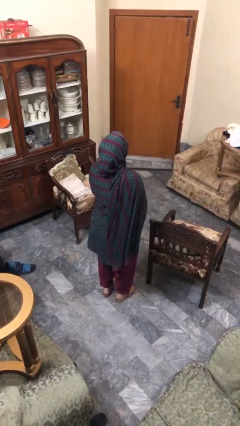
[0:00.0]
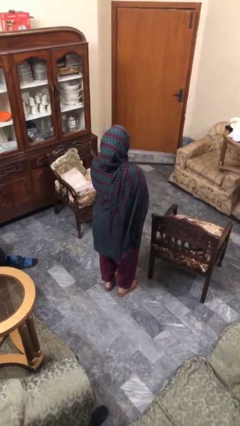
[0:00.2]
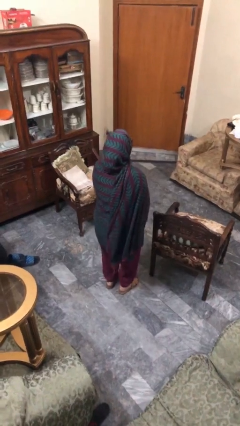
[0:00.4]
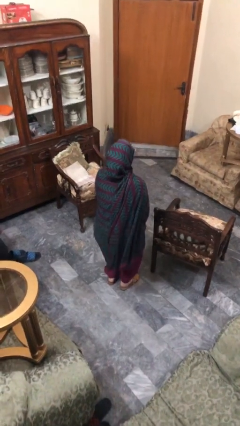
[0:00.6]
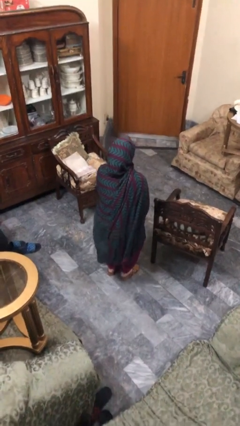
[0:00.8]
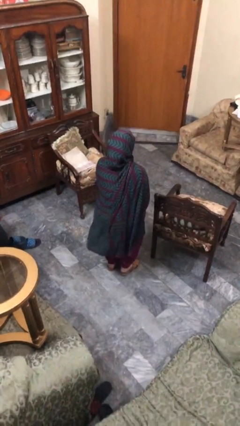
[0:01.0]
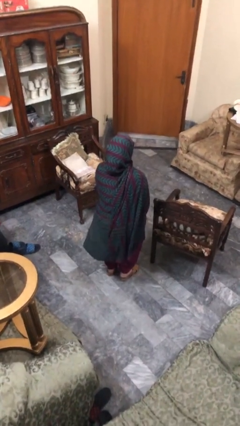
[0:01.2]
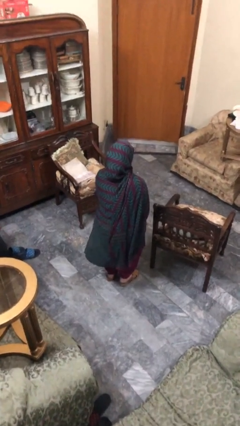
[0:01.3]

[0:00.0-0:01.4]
person squats

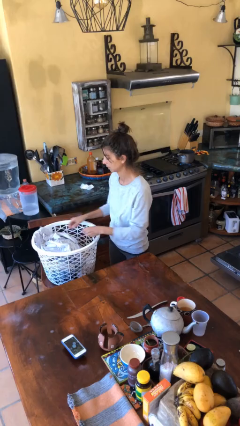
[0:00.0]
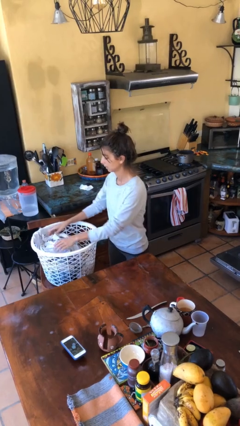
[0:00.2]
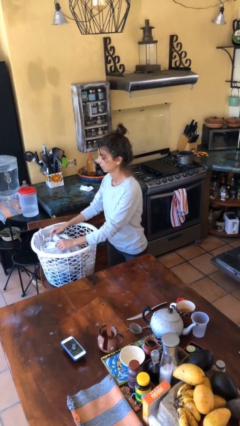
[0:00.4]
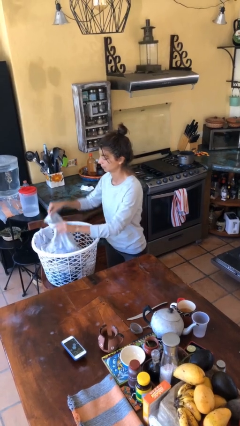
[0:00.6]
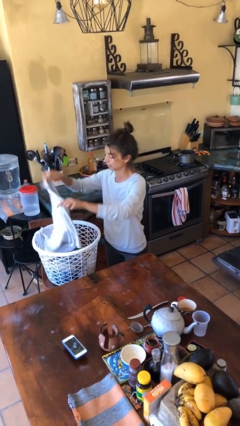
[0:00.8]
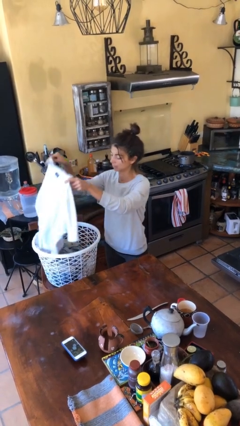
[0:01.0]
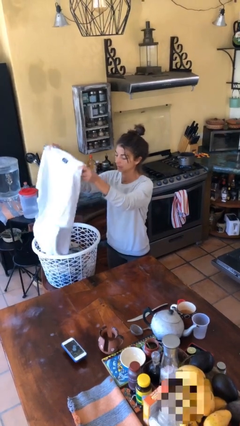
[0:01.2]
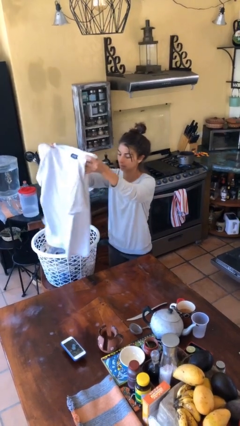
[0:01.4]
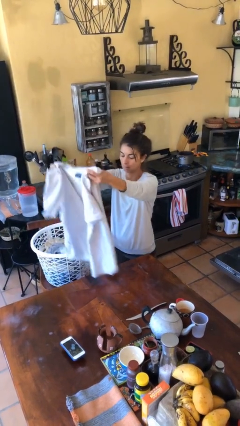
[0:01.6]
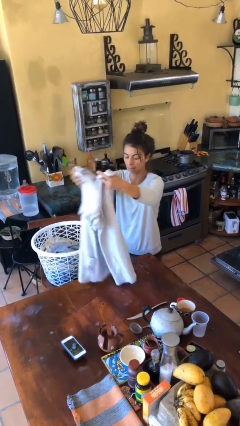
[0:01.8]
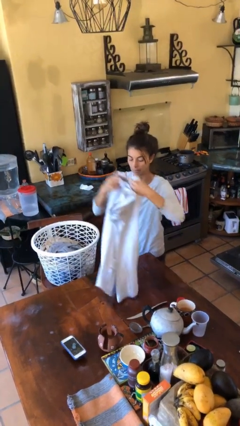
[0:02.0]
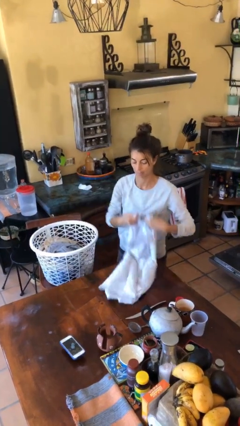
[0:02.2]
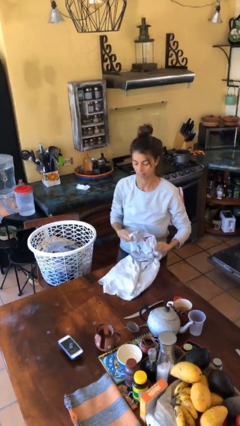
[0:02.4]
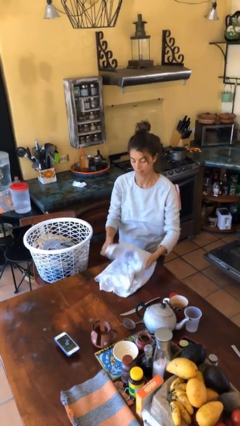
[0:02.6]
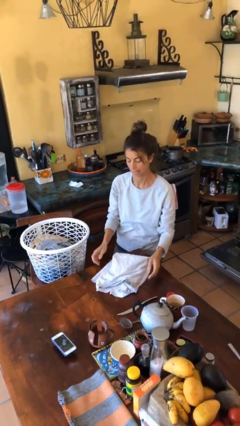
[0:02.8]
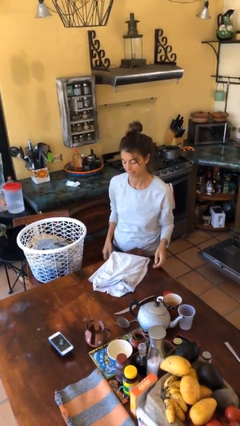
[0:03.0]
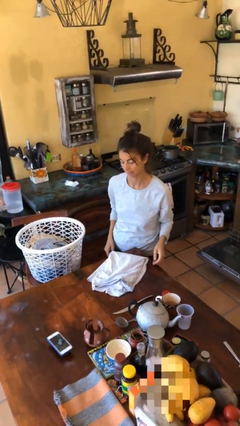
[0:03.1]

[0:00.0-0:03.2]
person folds shirt

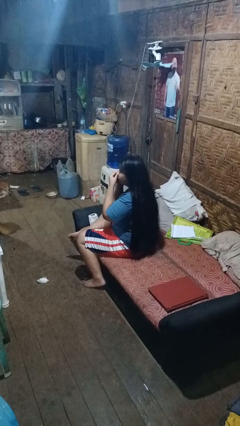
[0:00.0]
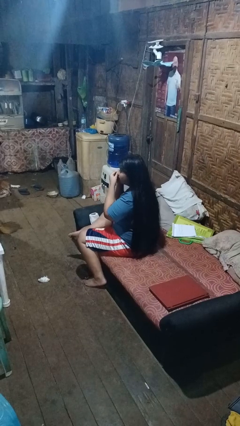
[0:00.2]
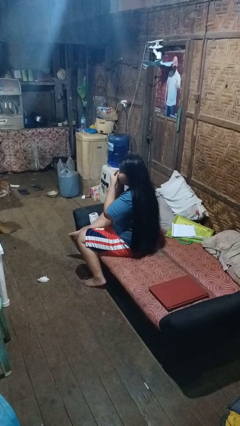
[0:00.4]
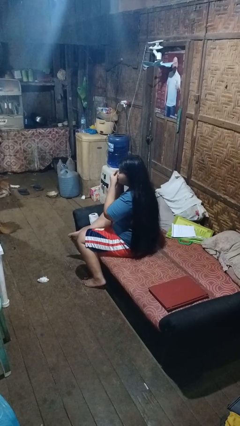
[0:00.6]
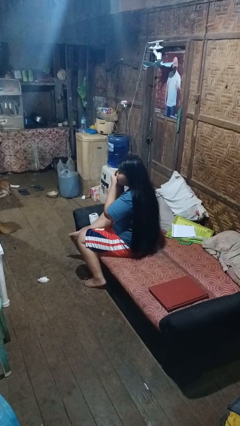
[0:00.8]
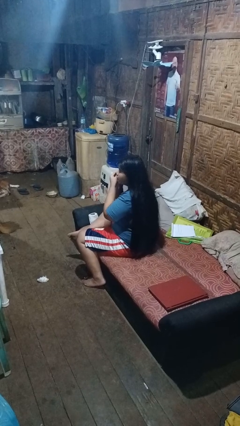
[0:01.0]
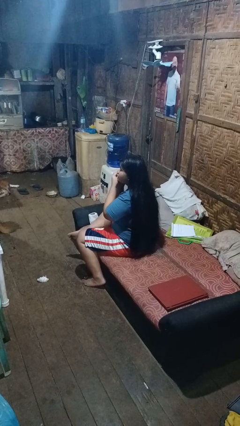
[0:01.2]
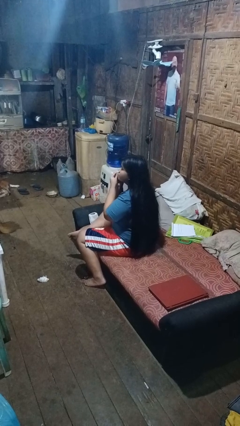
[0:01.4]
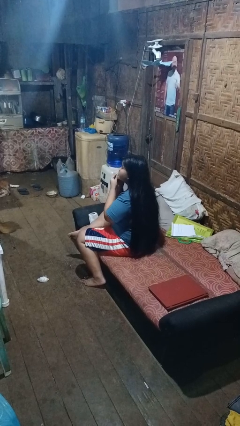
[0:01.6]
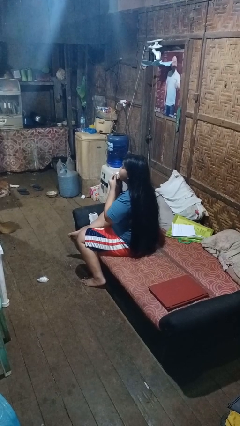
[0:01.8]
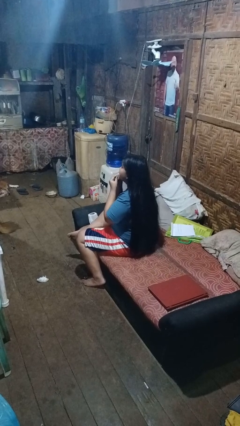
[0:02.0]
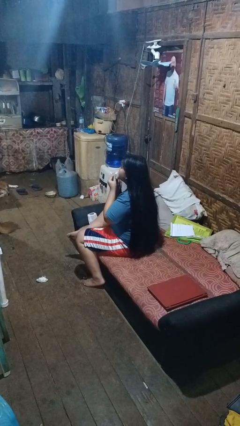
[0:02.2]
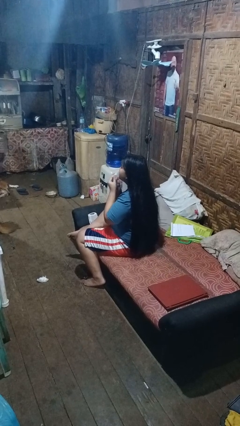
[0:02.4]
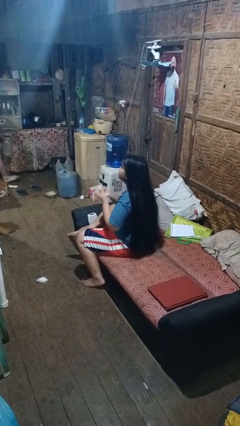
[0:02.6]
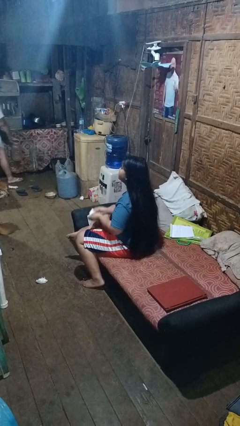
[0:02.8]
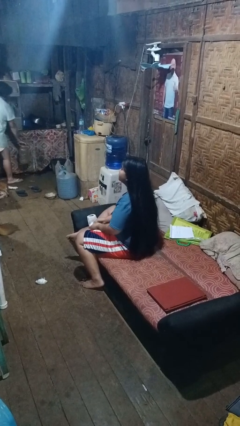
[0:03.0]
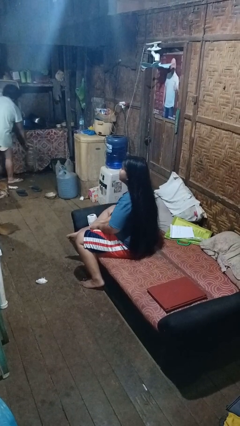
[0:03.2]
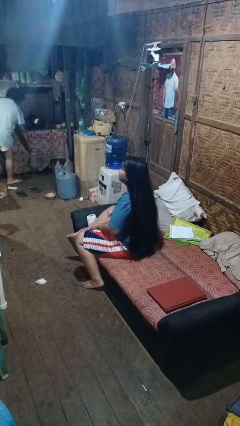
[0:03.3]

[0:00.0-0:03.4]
person wipes mouth with napkin

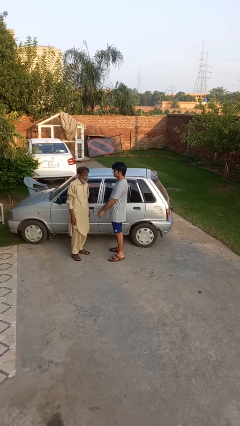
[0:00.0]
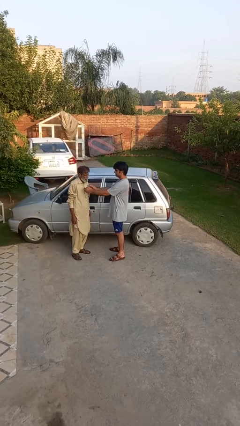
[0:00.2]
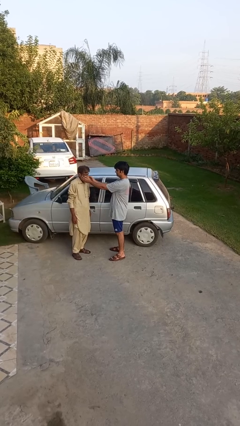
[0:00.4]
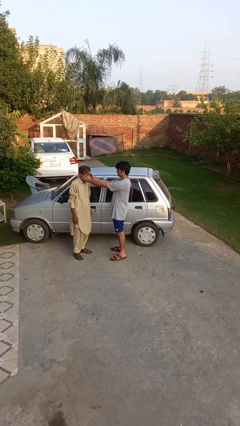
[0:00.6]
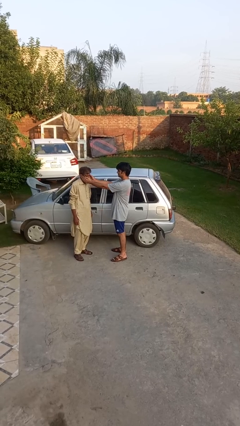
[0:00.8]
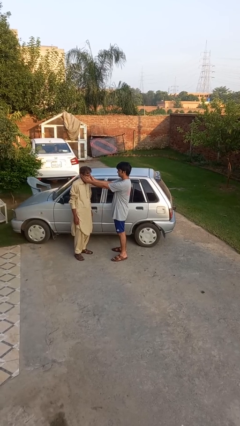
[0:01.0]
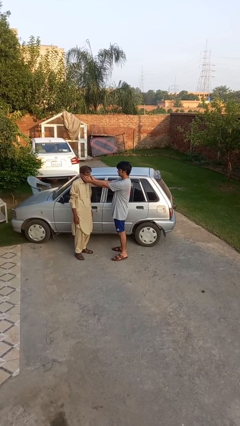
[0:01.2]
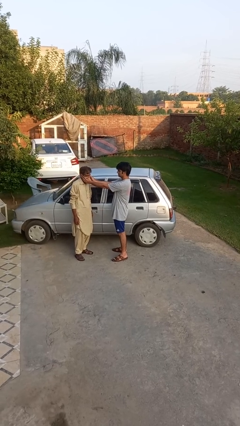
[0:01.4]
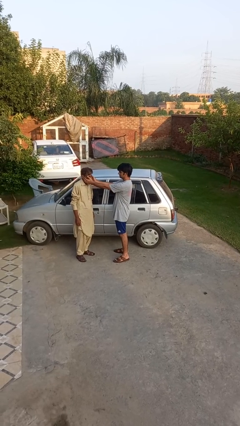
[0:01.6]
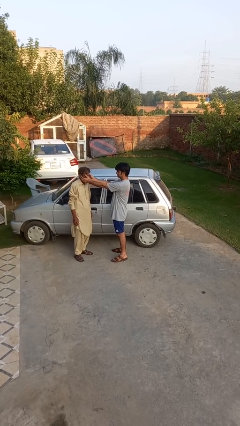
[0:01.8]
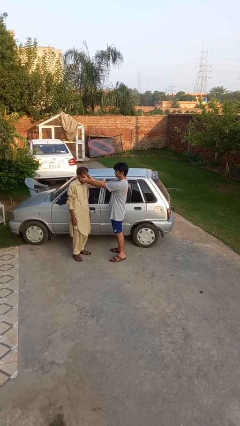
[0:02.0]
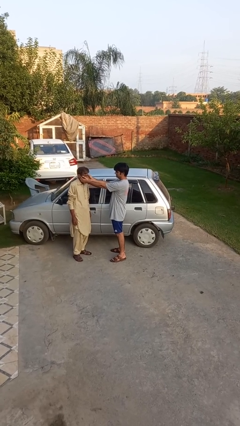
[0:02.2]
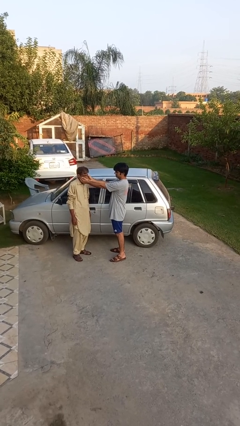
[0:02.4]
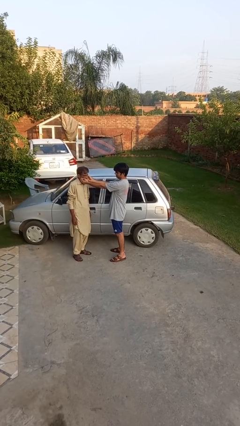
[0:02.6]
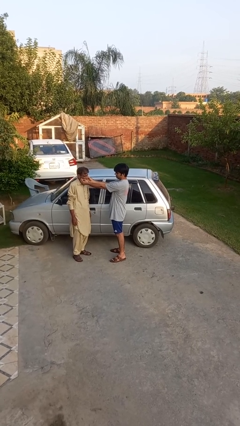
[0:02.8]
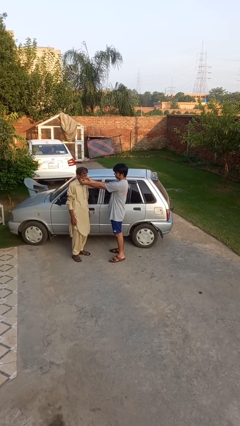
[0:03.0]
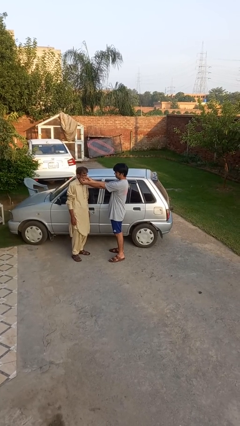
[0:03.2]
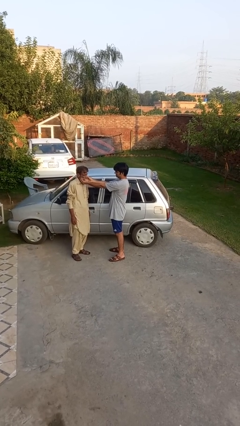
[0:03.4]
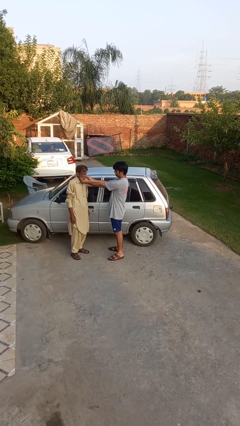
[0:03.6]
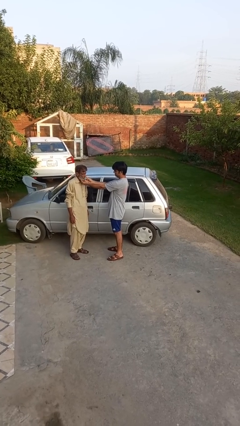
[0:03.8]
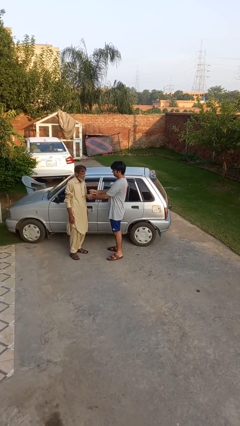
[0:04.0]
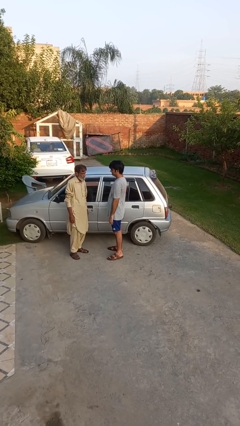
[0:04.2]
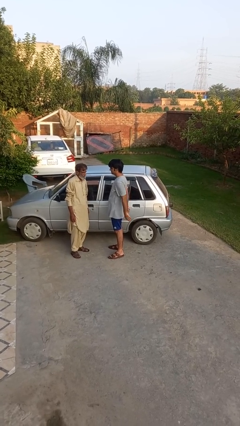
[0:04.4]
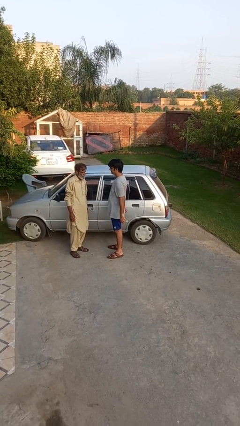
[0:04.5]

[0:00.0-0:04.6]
person touches face of person

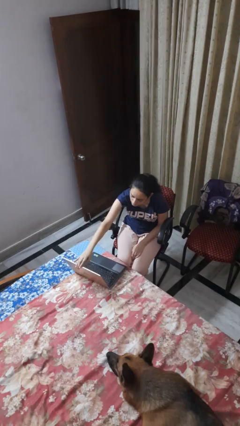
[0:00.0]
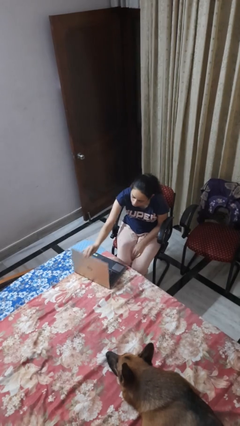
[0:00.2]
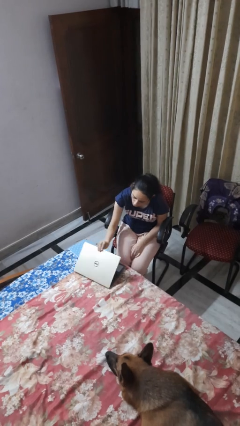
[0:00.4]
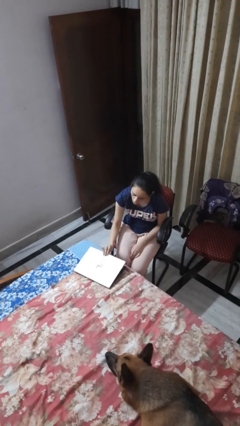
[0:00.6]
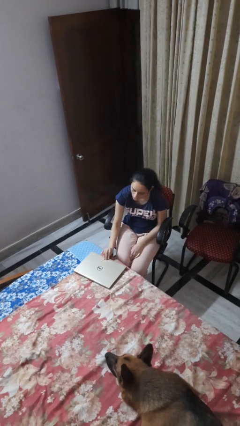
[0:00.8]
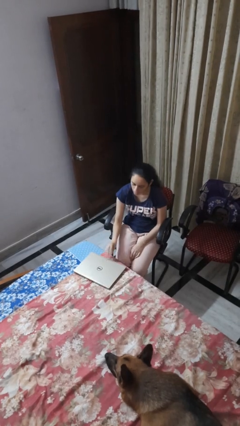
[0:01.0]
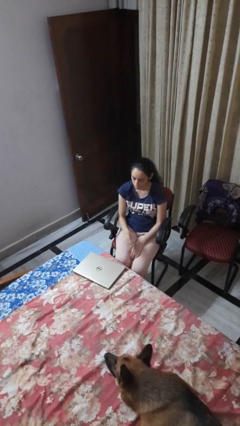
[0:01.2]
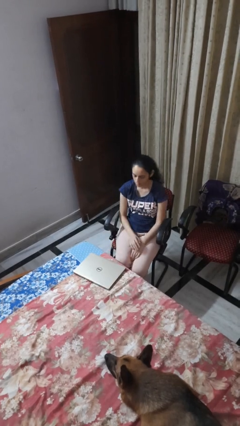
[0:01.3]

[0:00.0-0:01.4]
person closes laptop

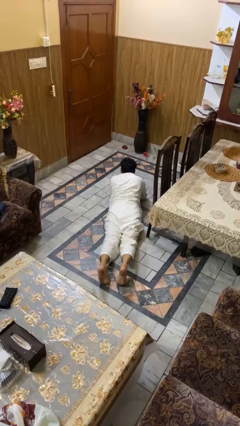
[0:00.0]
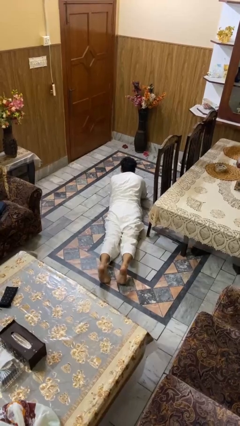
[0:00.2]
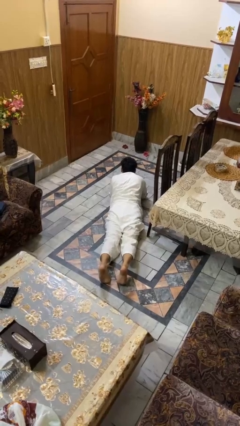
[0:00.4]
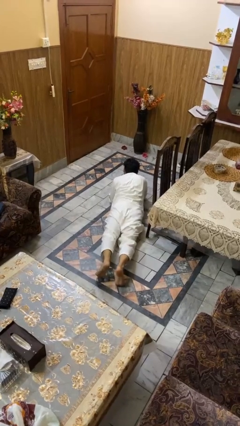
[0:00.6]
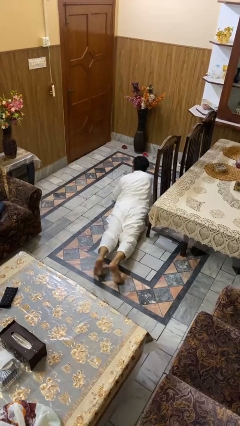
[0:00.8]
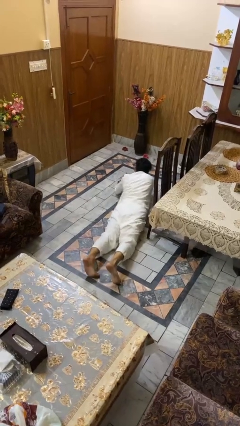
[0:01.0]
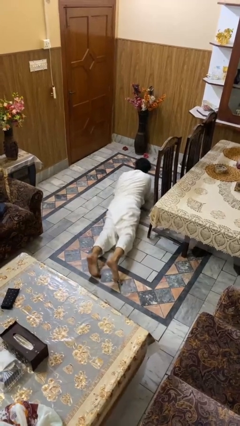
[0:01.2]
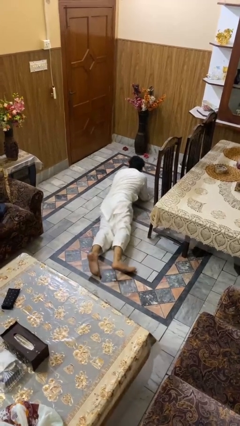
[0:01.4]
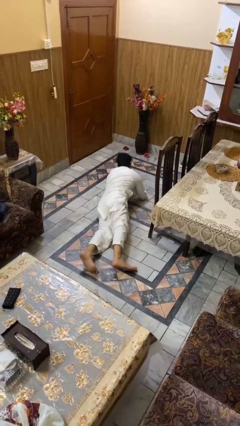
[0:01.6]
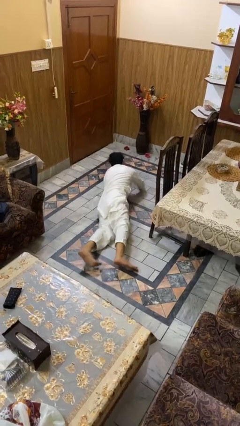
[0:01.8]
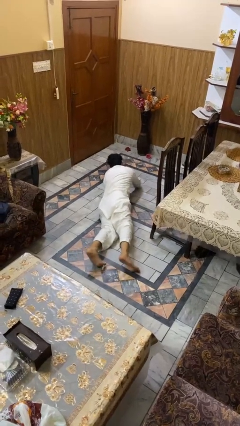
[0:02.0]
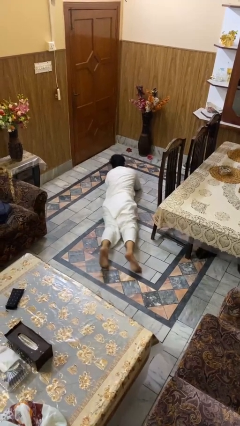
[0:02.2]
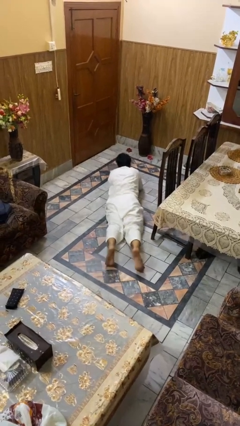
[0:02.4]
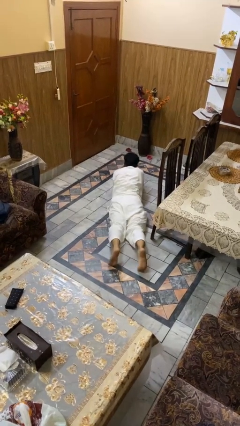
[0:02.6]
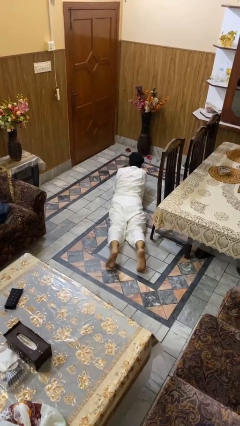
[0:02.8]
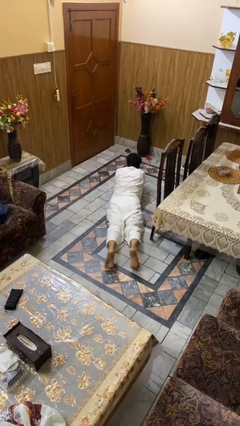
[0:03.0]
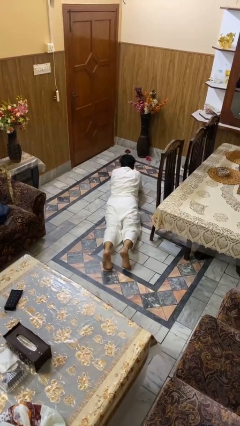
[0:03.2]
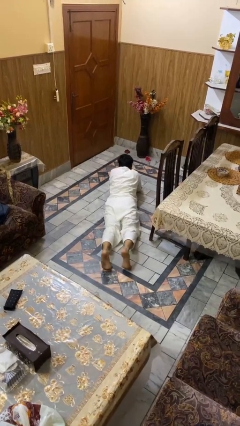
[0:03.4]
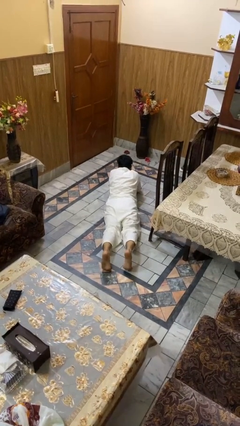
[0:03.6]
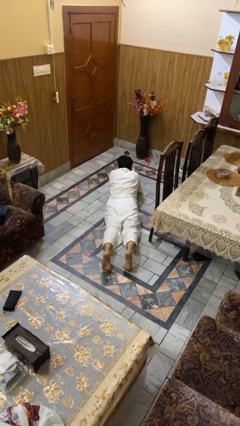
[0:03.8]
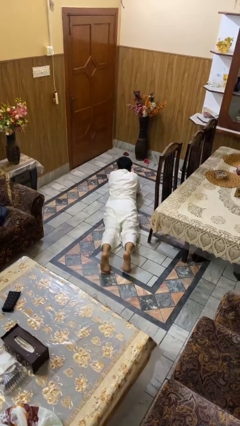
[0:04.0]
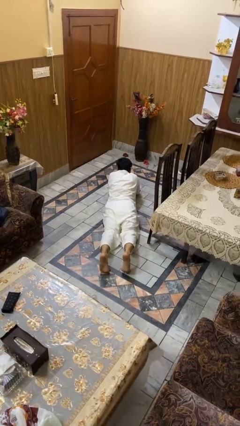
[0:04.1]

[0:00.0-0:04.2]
person crawls
